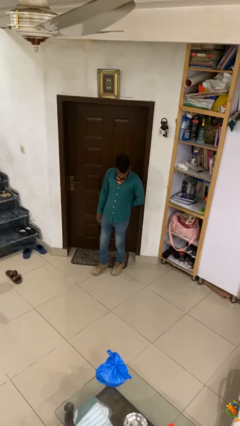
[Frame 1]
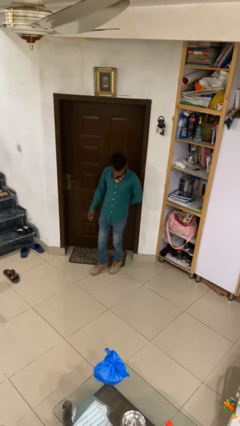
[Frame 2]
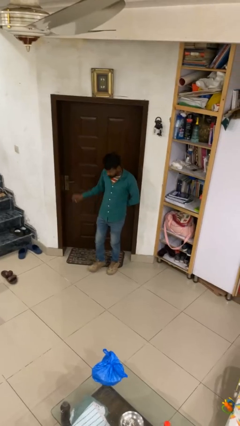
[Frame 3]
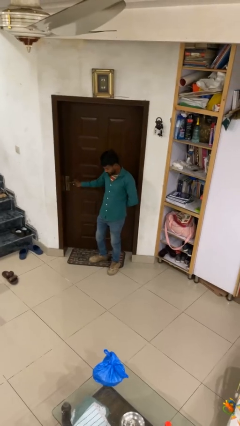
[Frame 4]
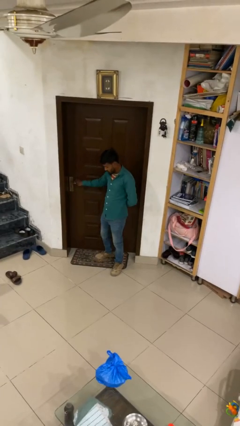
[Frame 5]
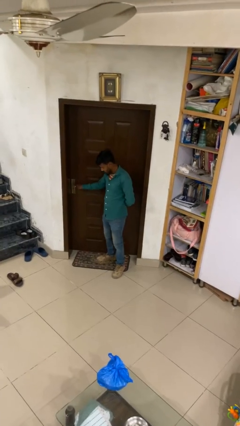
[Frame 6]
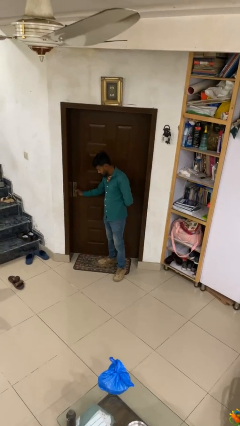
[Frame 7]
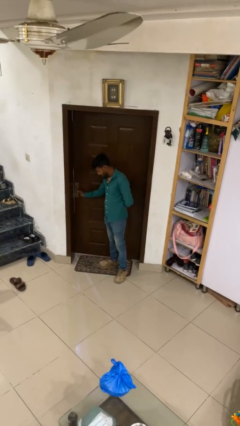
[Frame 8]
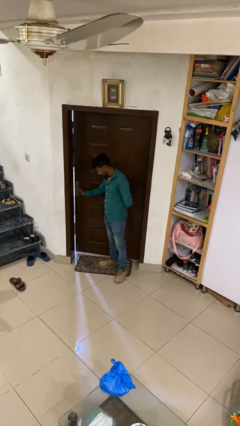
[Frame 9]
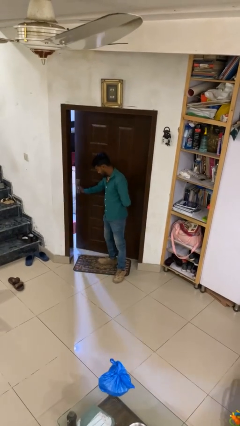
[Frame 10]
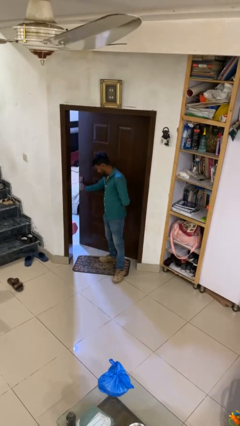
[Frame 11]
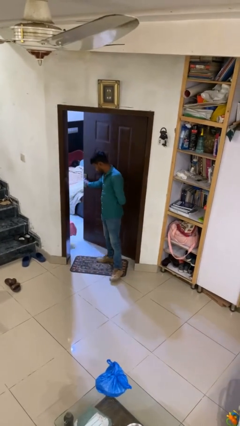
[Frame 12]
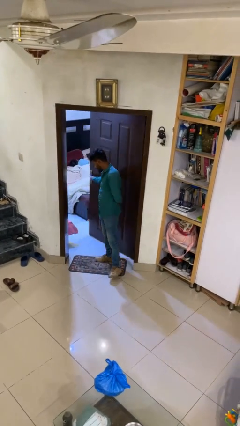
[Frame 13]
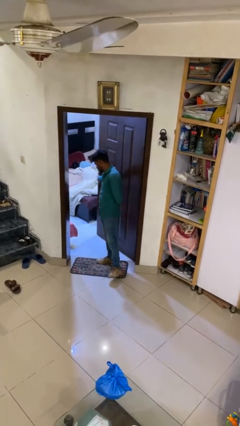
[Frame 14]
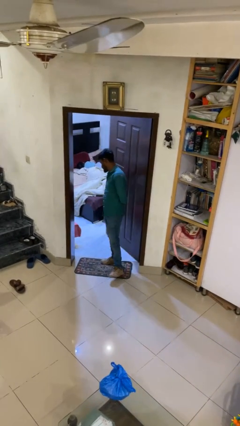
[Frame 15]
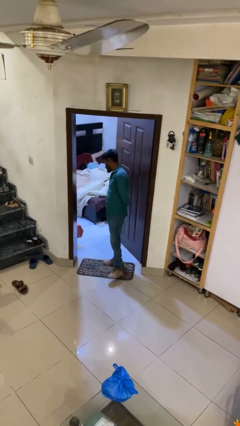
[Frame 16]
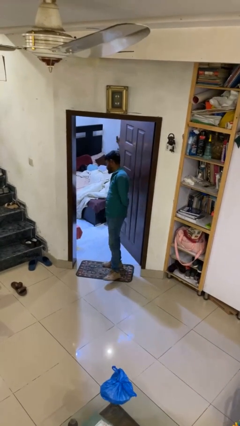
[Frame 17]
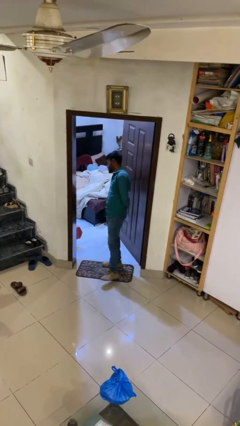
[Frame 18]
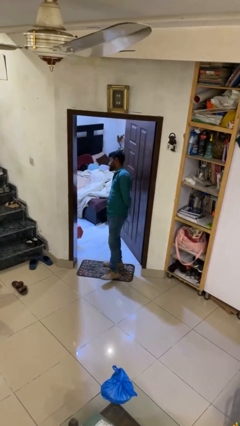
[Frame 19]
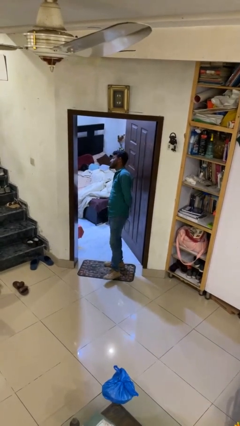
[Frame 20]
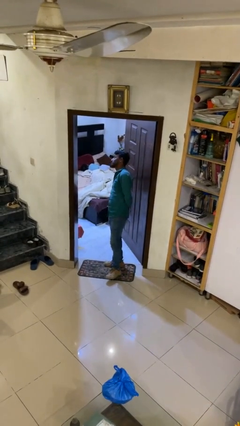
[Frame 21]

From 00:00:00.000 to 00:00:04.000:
person opens facility door

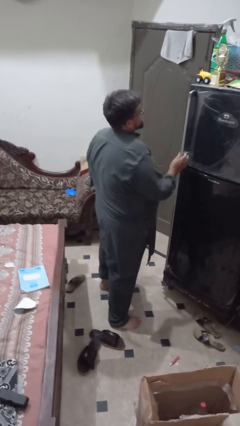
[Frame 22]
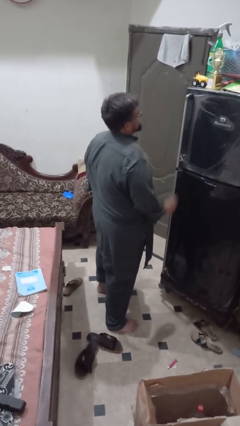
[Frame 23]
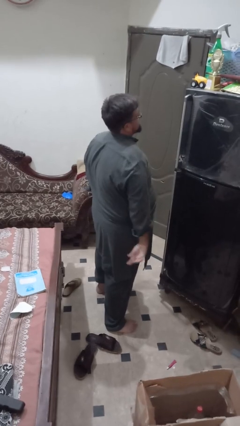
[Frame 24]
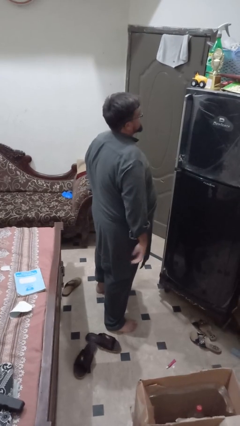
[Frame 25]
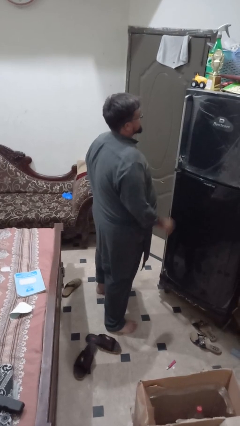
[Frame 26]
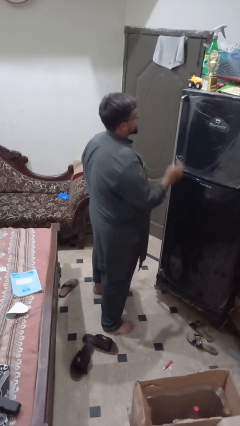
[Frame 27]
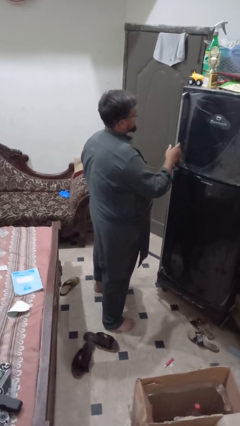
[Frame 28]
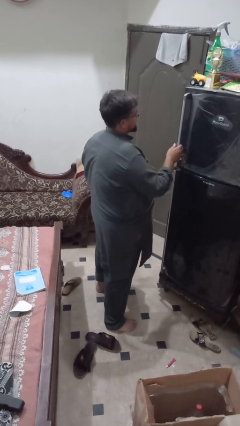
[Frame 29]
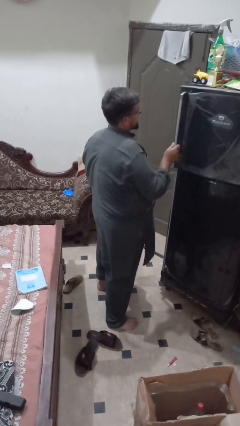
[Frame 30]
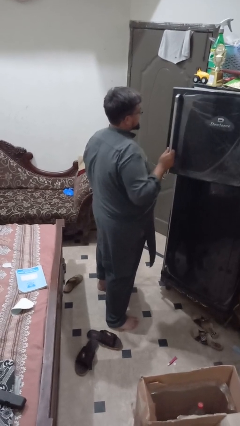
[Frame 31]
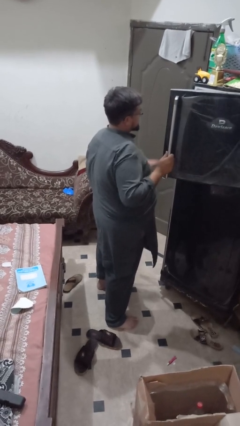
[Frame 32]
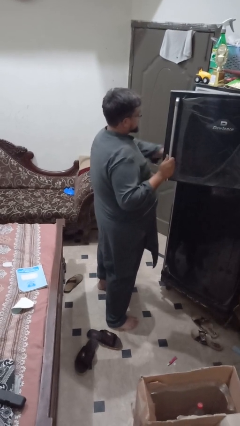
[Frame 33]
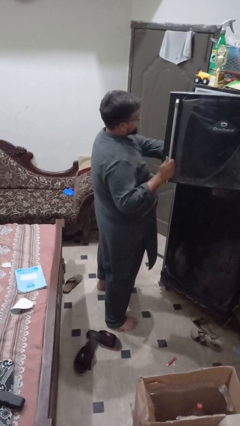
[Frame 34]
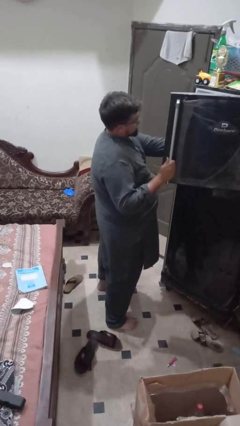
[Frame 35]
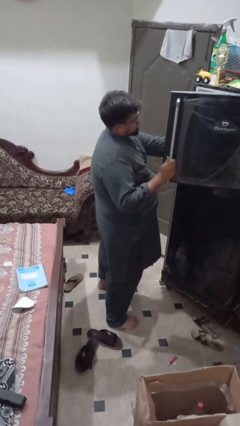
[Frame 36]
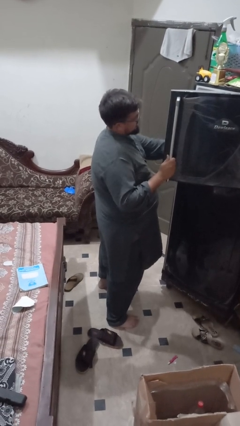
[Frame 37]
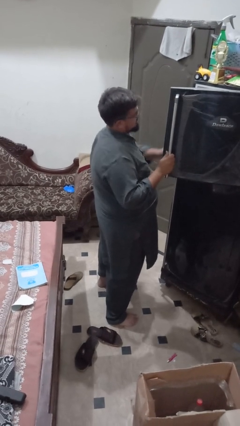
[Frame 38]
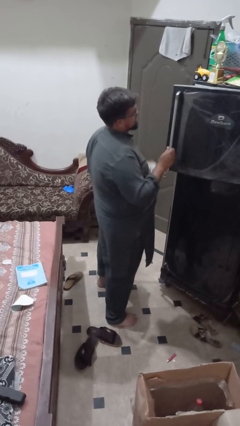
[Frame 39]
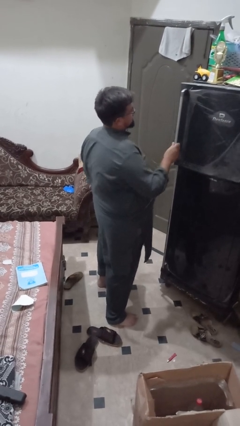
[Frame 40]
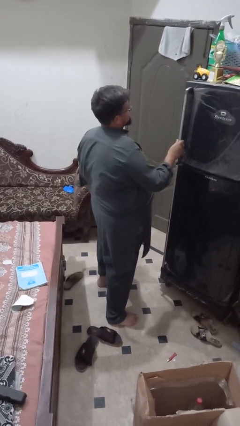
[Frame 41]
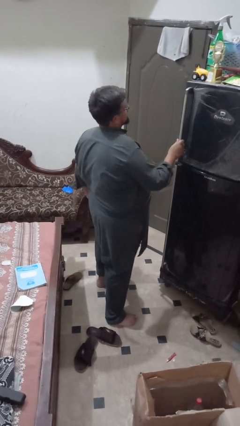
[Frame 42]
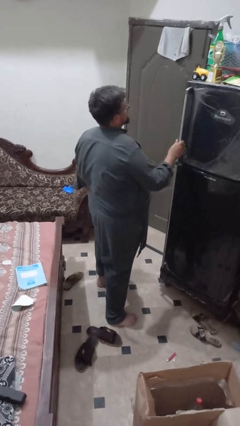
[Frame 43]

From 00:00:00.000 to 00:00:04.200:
person takes object from refrigerator

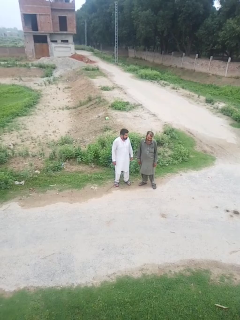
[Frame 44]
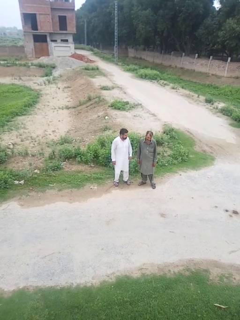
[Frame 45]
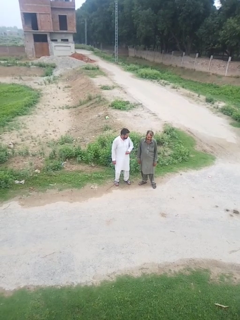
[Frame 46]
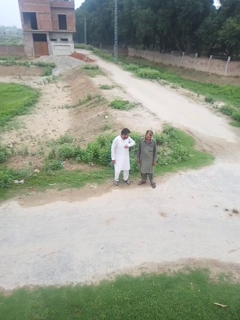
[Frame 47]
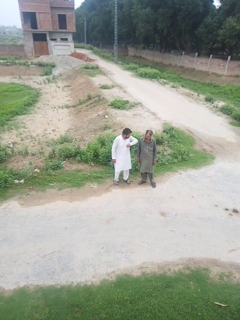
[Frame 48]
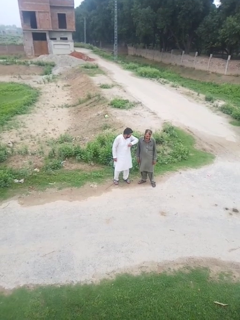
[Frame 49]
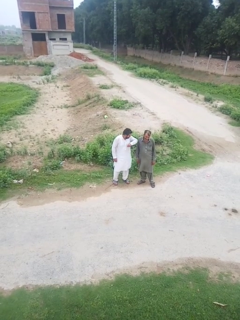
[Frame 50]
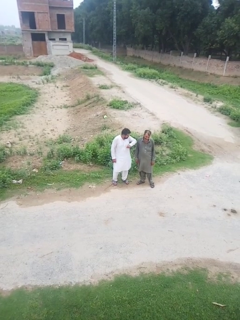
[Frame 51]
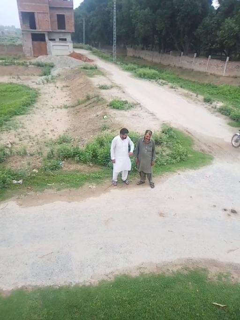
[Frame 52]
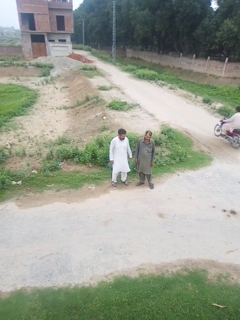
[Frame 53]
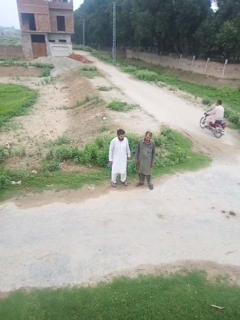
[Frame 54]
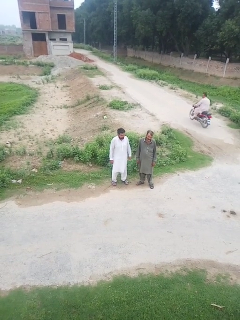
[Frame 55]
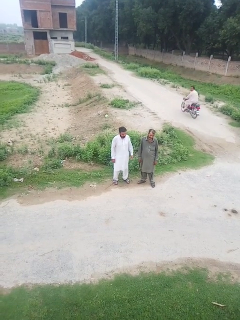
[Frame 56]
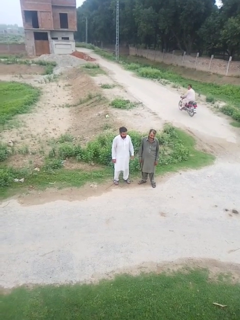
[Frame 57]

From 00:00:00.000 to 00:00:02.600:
person nudges person with elbow

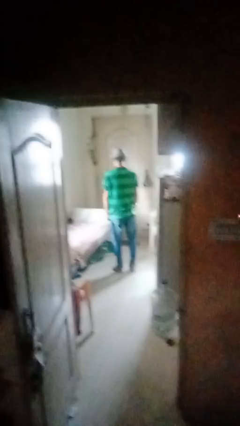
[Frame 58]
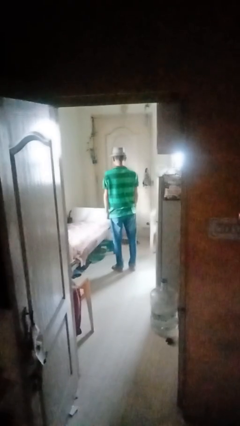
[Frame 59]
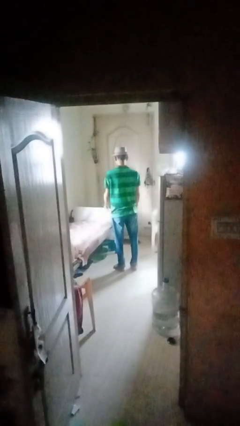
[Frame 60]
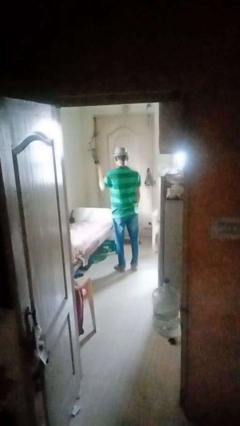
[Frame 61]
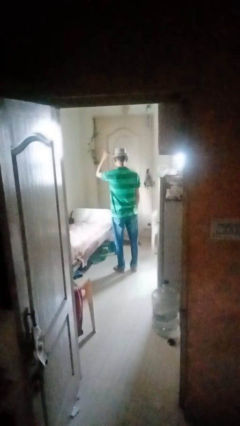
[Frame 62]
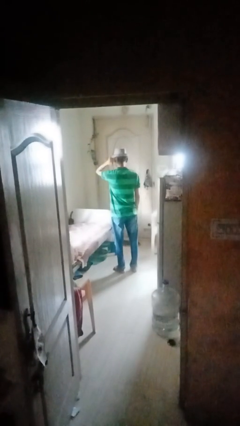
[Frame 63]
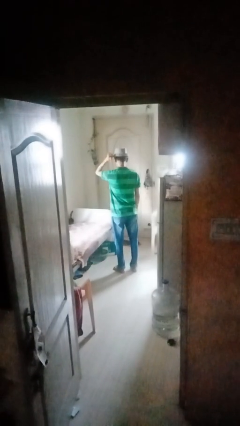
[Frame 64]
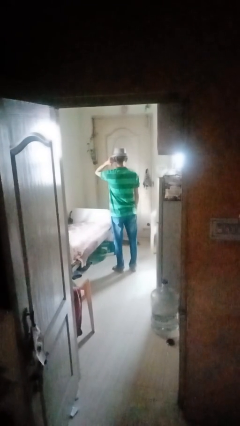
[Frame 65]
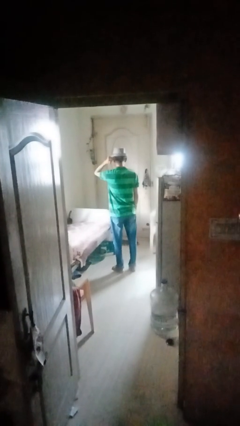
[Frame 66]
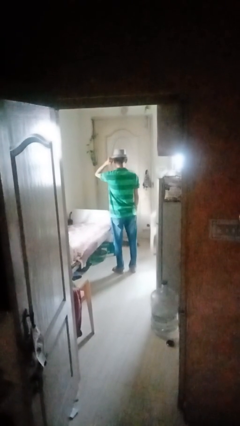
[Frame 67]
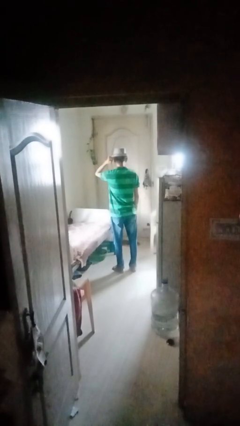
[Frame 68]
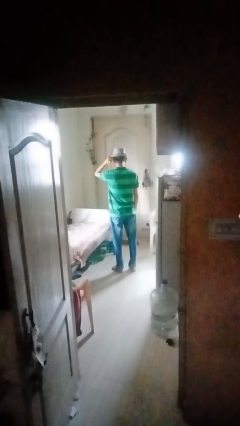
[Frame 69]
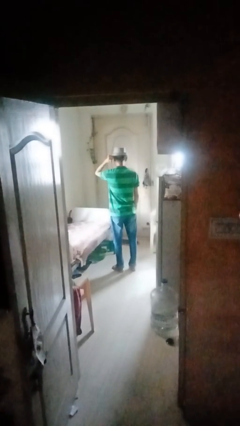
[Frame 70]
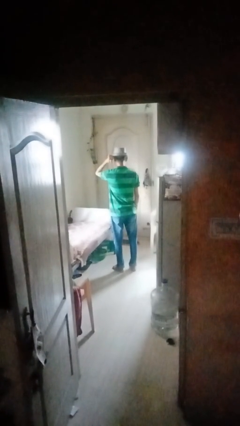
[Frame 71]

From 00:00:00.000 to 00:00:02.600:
person gestures behind me

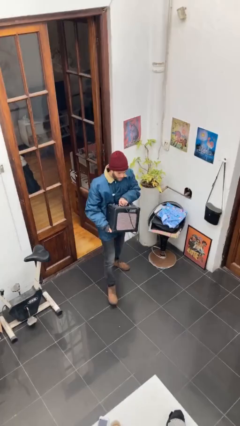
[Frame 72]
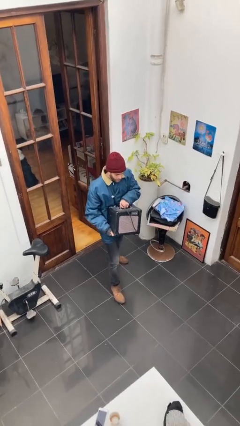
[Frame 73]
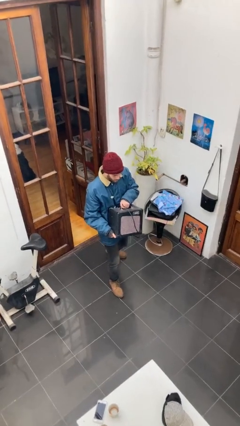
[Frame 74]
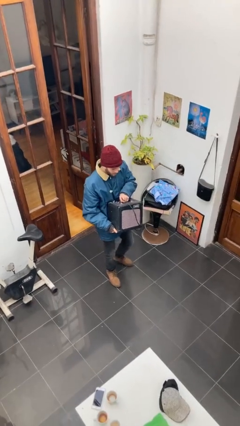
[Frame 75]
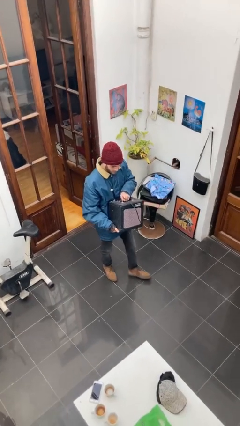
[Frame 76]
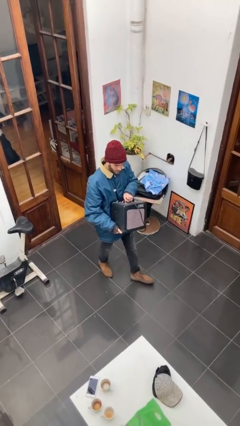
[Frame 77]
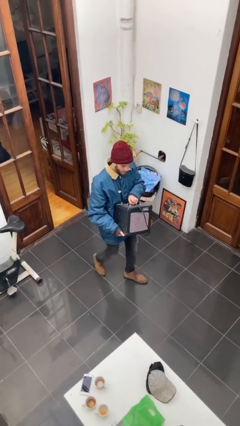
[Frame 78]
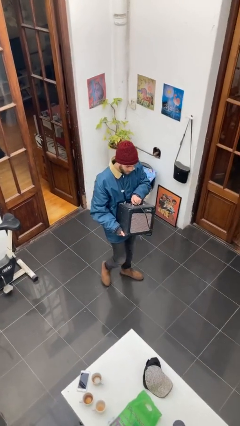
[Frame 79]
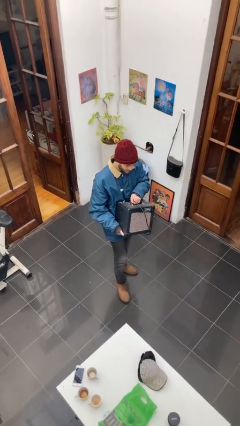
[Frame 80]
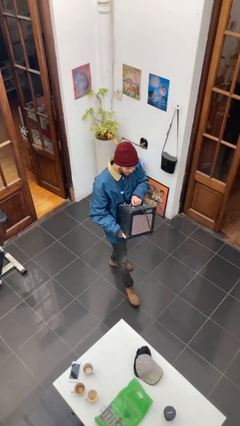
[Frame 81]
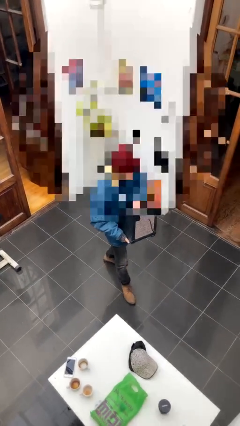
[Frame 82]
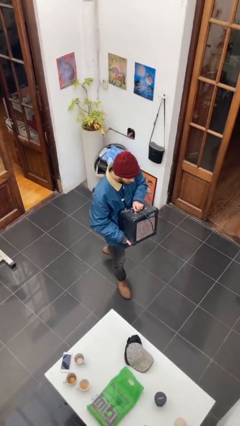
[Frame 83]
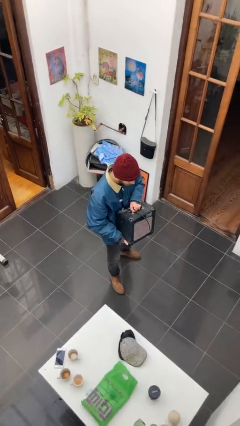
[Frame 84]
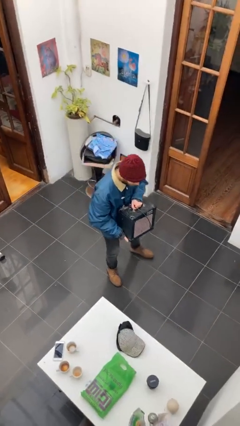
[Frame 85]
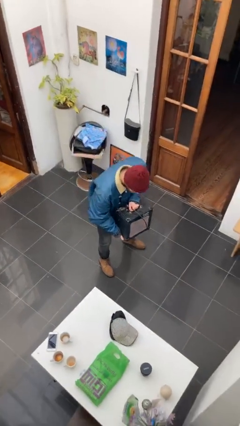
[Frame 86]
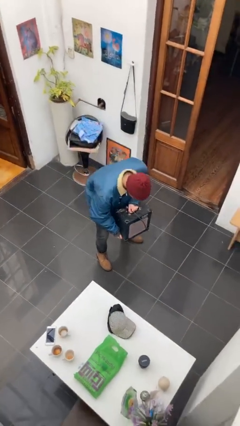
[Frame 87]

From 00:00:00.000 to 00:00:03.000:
person carries heavy object

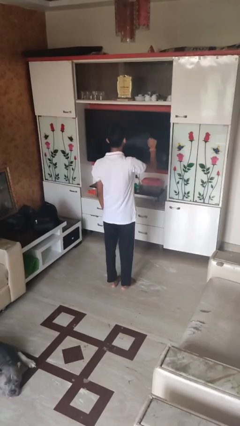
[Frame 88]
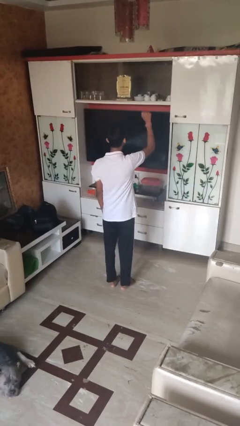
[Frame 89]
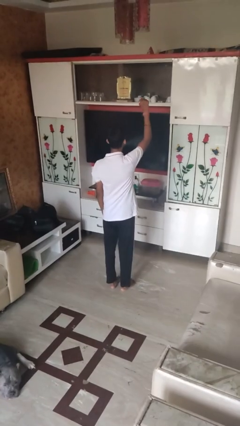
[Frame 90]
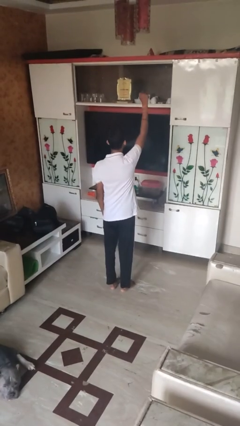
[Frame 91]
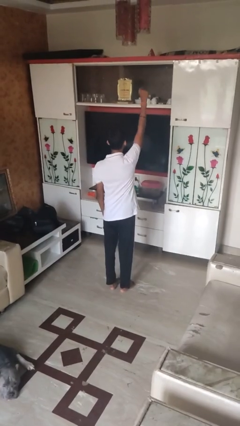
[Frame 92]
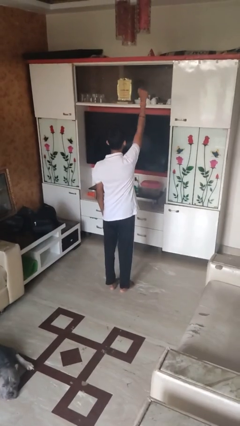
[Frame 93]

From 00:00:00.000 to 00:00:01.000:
person gestures raise hand
